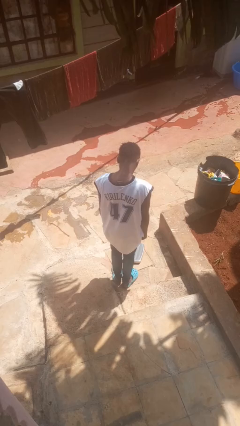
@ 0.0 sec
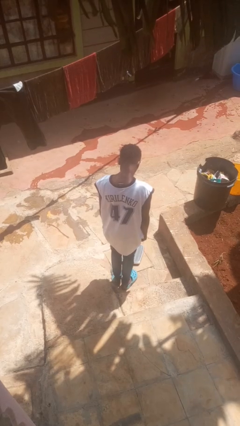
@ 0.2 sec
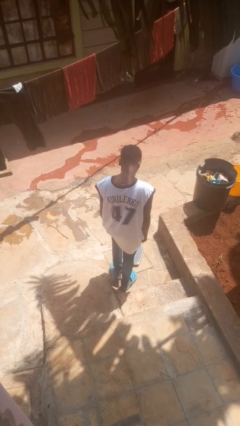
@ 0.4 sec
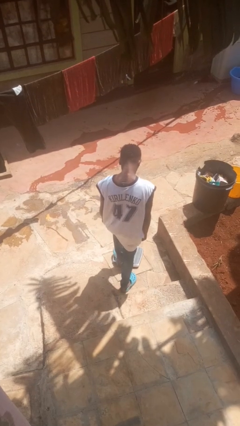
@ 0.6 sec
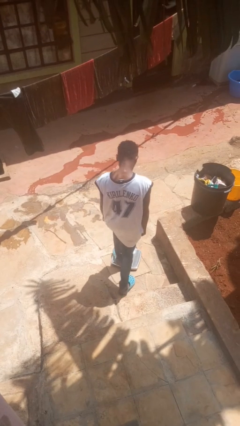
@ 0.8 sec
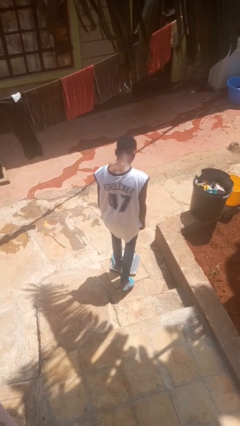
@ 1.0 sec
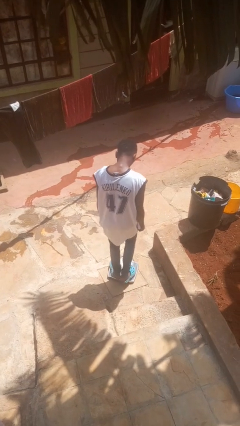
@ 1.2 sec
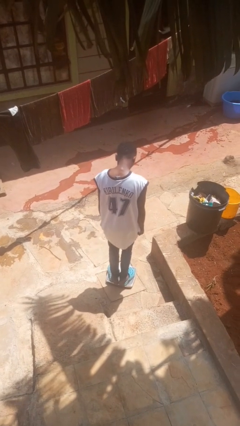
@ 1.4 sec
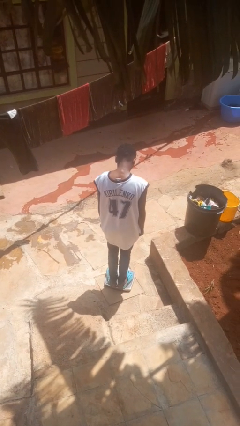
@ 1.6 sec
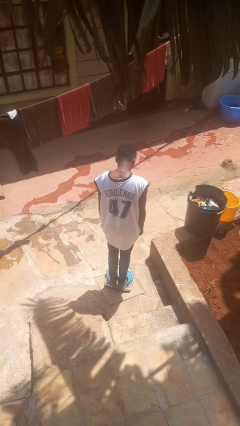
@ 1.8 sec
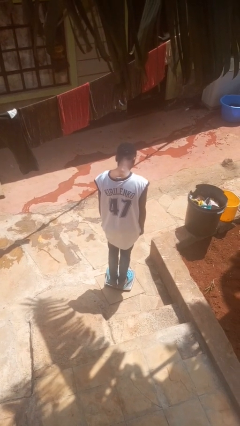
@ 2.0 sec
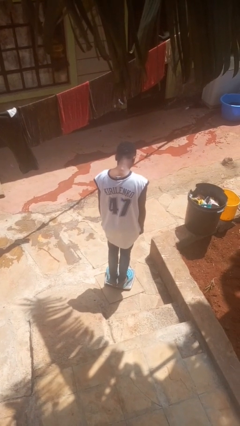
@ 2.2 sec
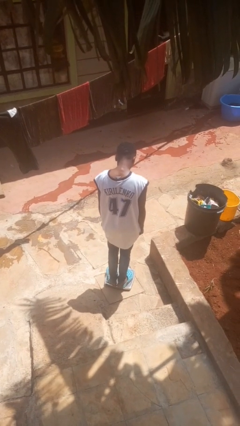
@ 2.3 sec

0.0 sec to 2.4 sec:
person uses bodyweight scale

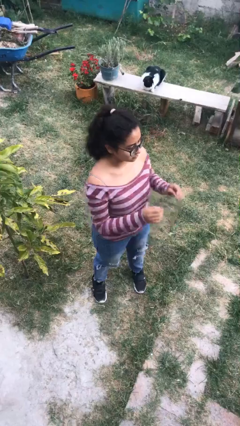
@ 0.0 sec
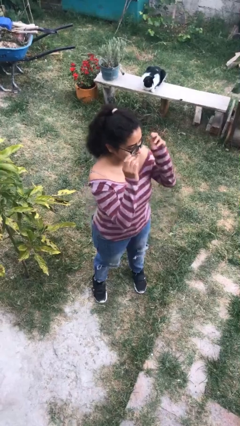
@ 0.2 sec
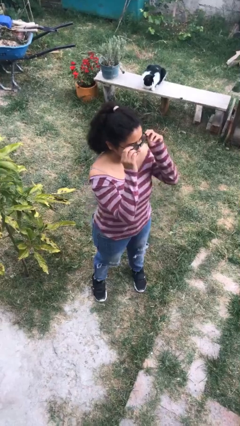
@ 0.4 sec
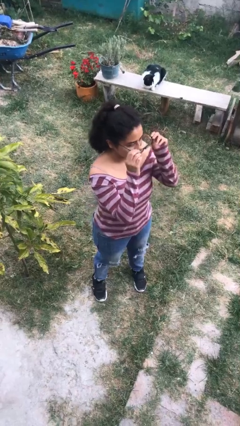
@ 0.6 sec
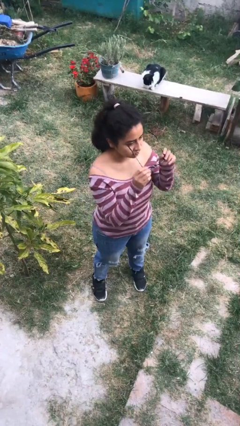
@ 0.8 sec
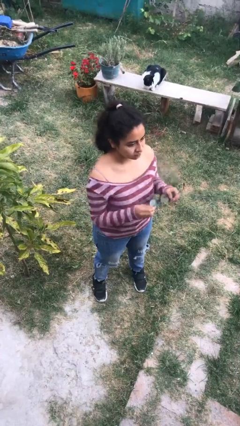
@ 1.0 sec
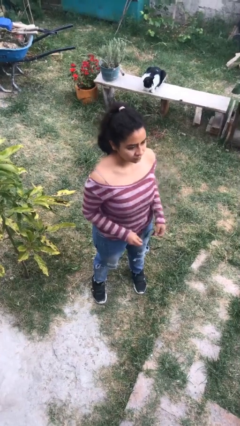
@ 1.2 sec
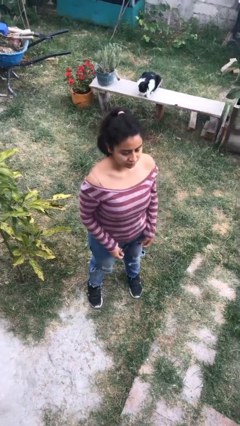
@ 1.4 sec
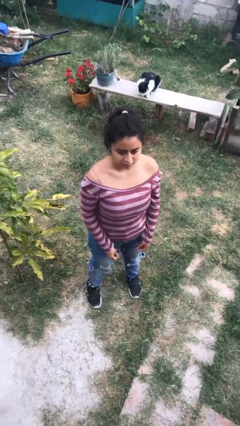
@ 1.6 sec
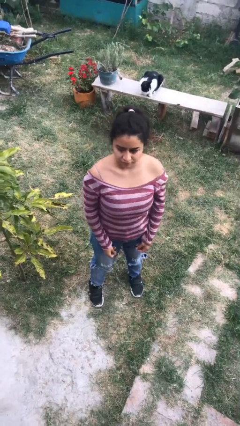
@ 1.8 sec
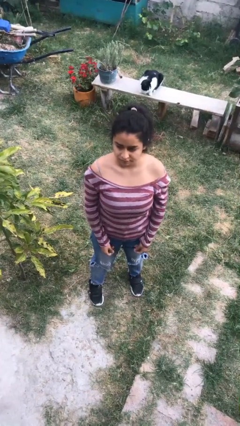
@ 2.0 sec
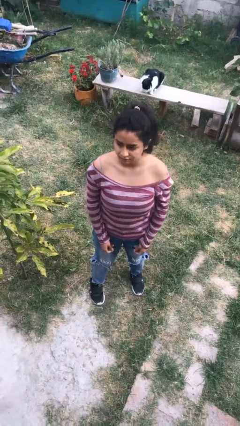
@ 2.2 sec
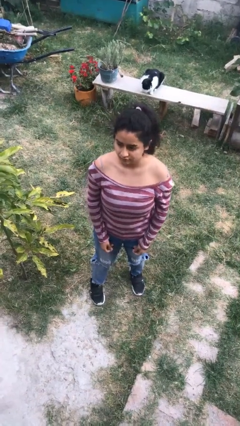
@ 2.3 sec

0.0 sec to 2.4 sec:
person takes off glasses

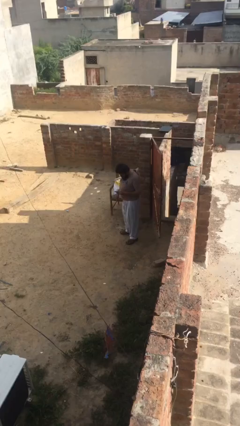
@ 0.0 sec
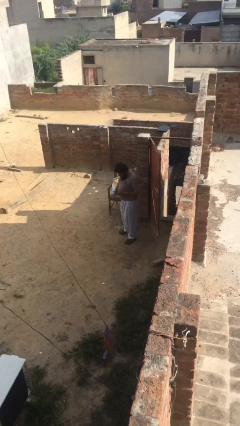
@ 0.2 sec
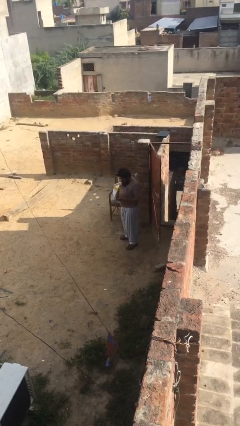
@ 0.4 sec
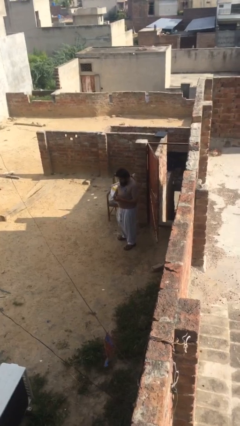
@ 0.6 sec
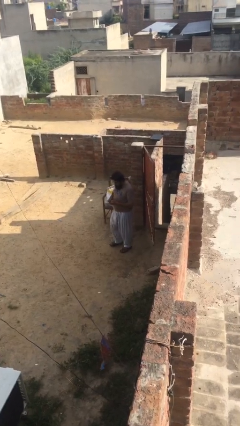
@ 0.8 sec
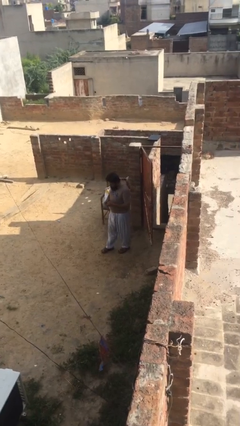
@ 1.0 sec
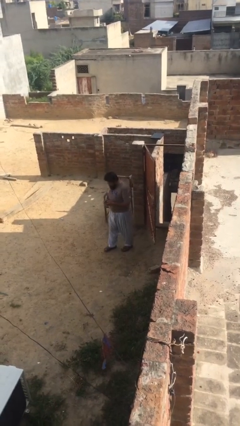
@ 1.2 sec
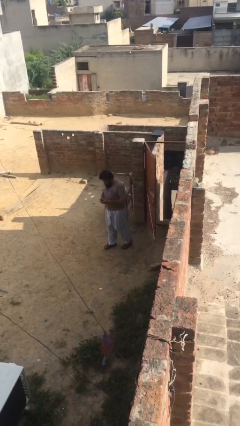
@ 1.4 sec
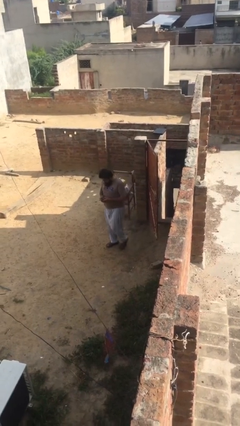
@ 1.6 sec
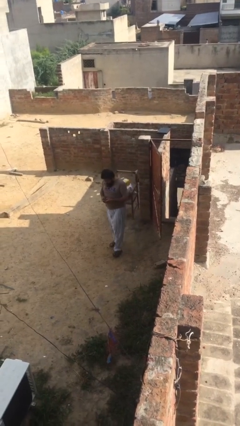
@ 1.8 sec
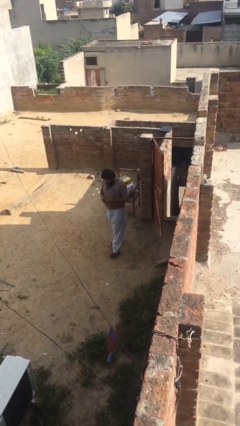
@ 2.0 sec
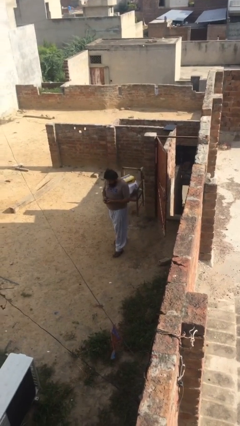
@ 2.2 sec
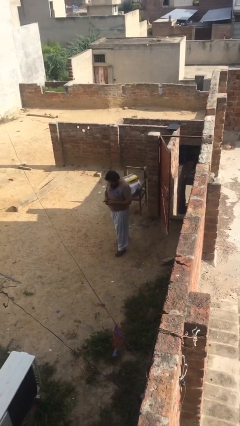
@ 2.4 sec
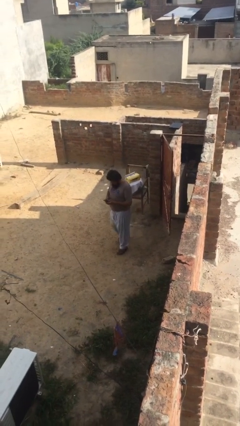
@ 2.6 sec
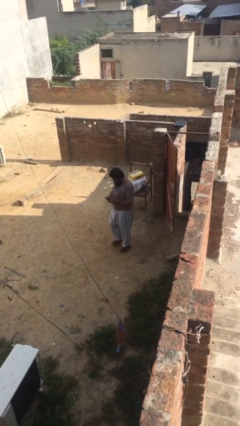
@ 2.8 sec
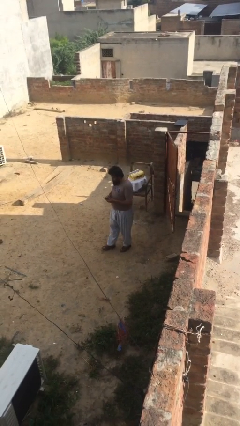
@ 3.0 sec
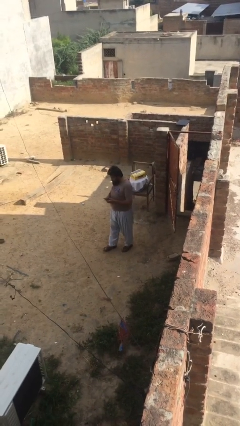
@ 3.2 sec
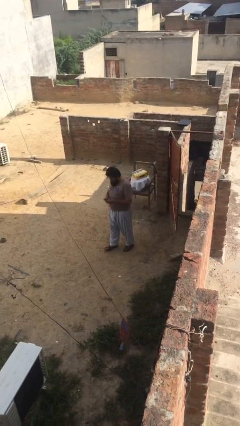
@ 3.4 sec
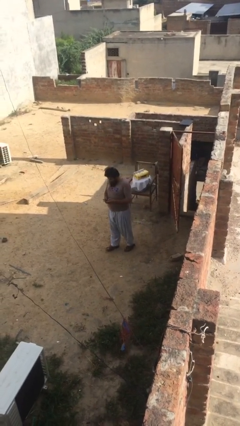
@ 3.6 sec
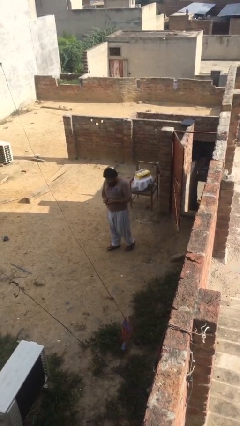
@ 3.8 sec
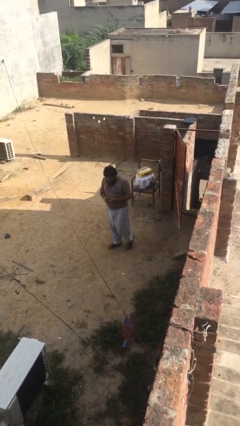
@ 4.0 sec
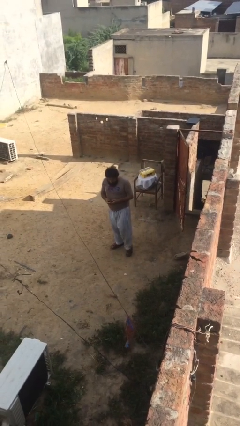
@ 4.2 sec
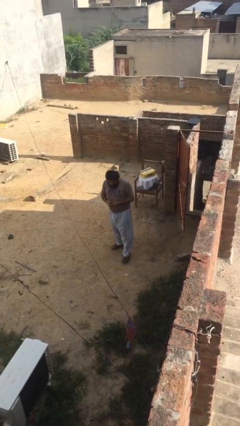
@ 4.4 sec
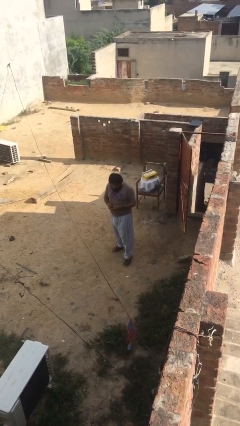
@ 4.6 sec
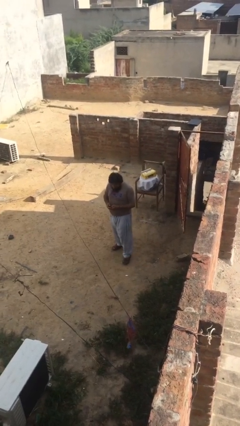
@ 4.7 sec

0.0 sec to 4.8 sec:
person texts on phone

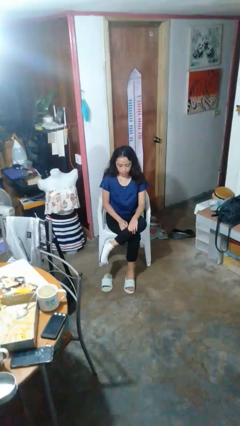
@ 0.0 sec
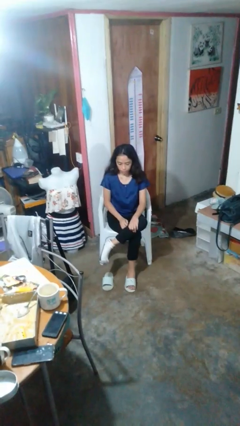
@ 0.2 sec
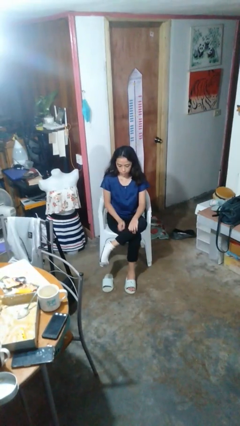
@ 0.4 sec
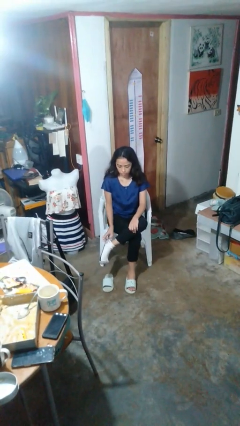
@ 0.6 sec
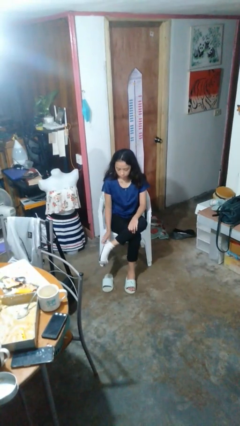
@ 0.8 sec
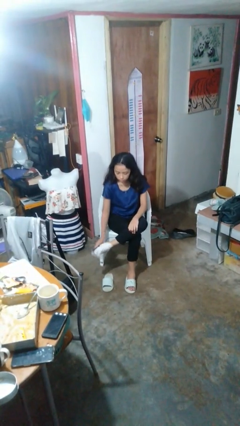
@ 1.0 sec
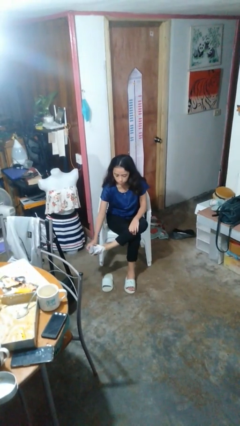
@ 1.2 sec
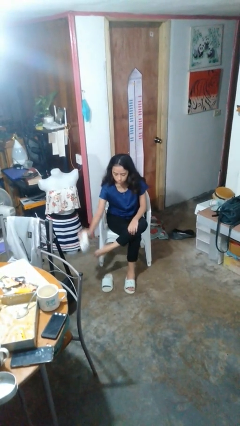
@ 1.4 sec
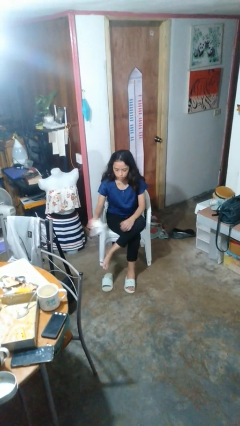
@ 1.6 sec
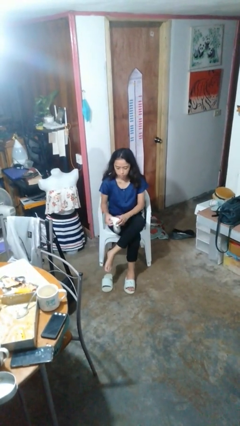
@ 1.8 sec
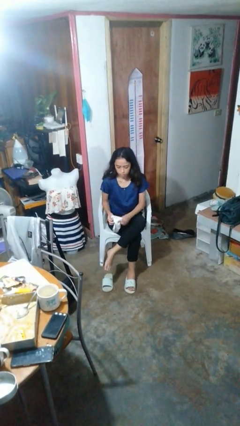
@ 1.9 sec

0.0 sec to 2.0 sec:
person takes off socks

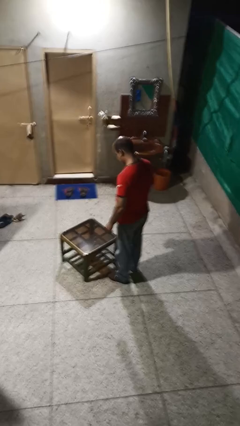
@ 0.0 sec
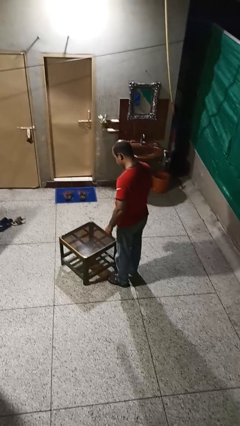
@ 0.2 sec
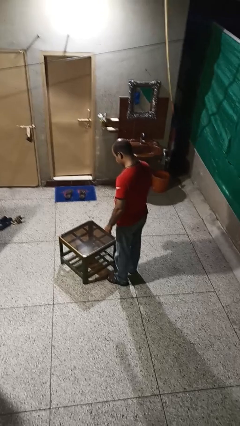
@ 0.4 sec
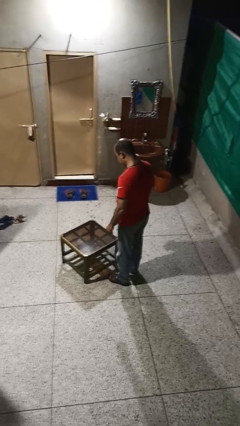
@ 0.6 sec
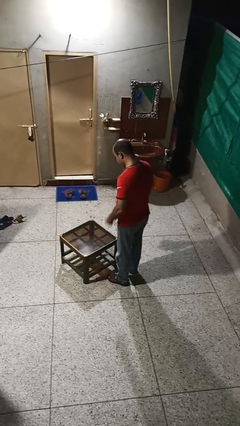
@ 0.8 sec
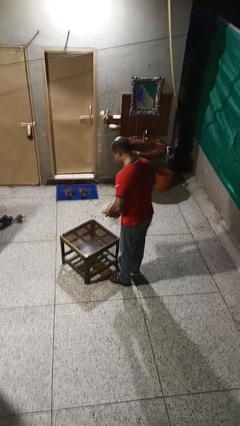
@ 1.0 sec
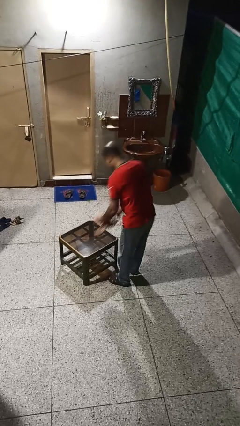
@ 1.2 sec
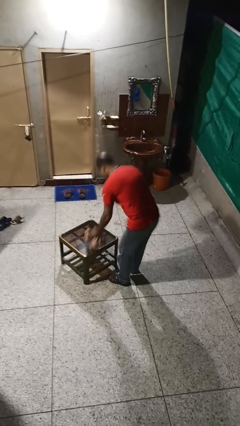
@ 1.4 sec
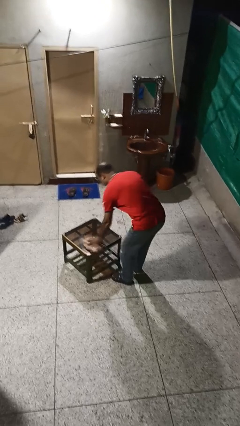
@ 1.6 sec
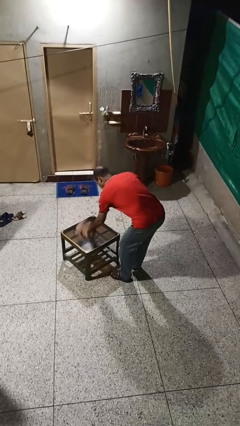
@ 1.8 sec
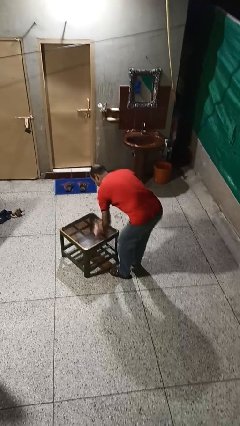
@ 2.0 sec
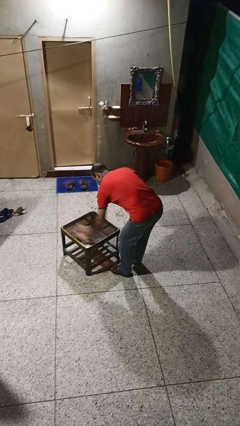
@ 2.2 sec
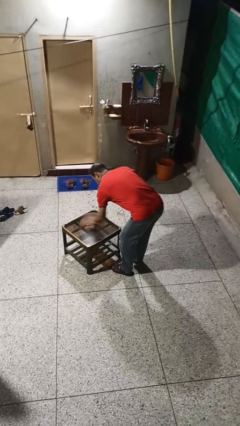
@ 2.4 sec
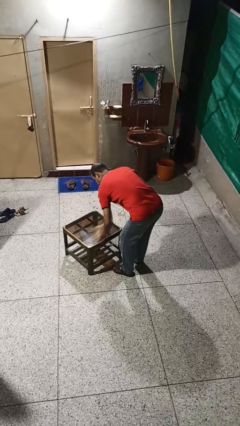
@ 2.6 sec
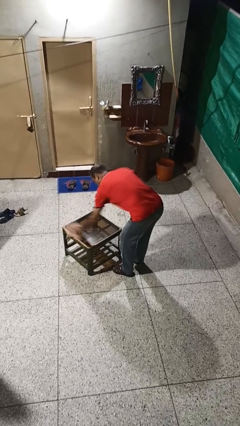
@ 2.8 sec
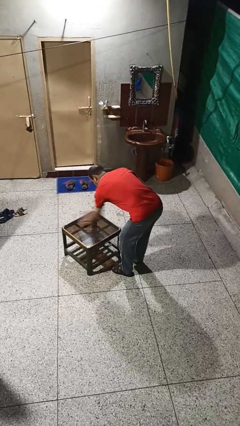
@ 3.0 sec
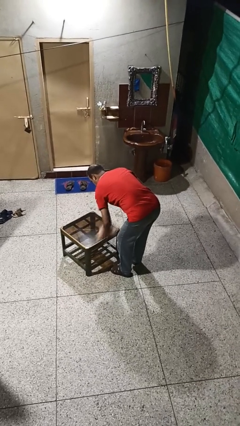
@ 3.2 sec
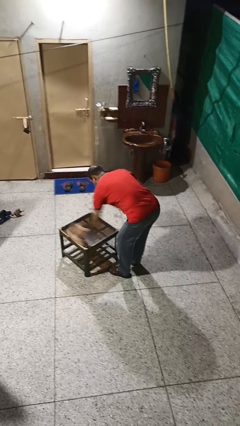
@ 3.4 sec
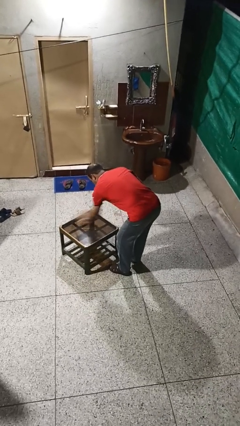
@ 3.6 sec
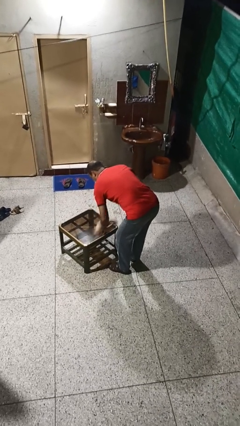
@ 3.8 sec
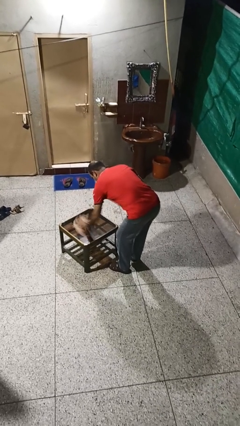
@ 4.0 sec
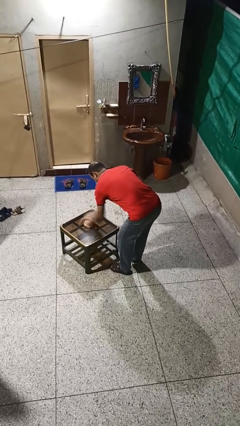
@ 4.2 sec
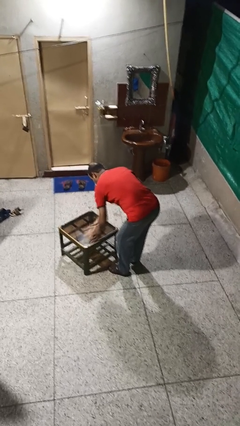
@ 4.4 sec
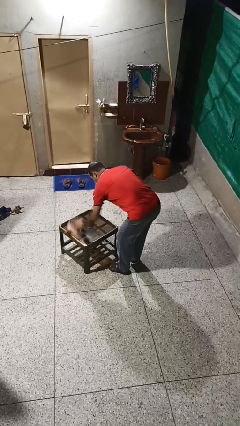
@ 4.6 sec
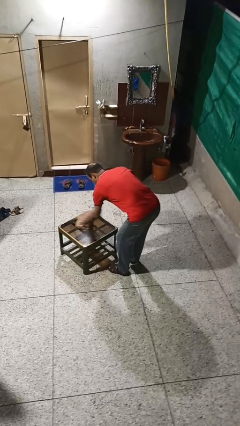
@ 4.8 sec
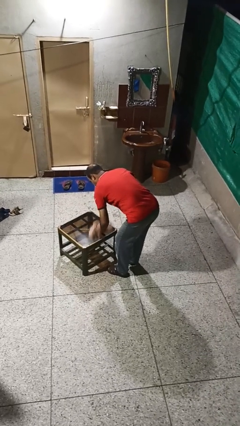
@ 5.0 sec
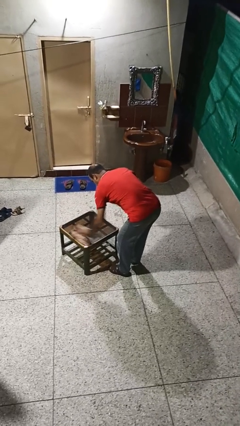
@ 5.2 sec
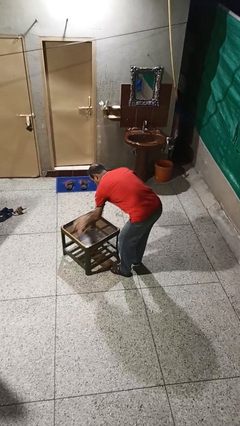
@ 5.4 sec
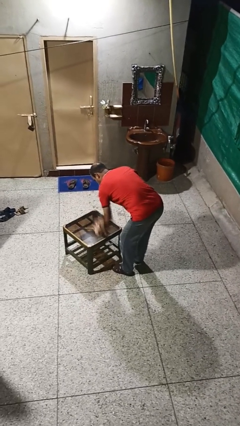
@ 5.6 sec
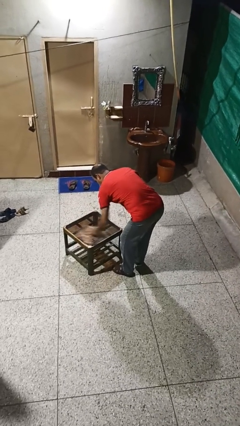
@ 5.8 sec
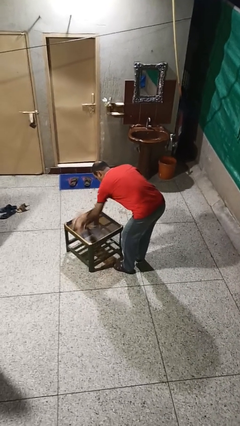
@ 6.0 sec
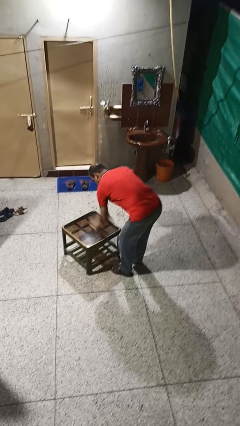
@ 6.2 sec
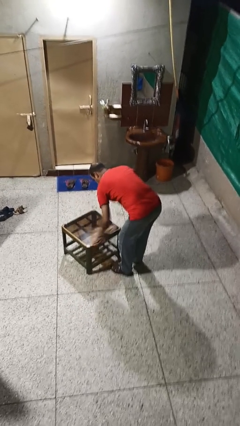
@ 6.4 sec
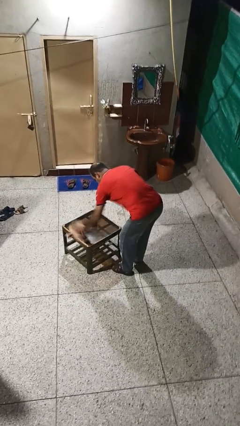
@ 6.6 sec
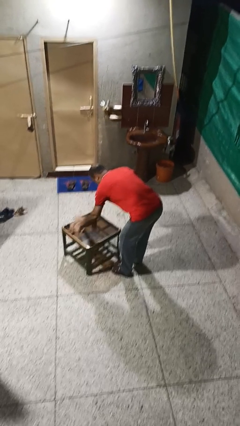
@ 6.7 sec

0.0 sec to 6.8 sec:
person cleans table with rag
